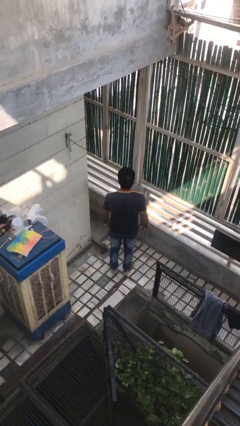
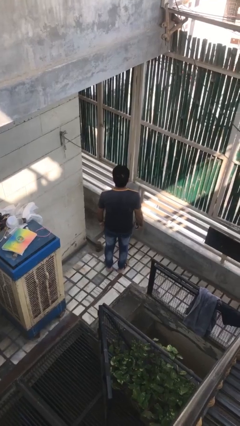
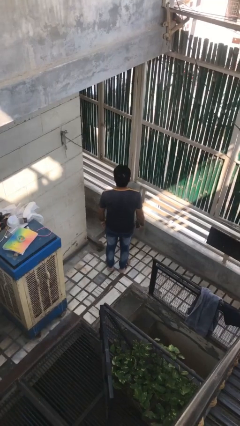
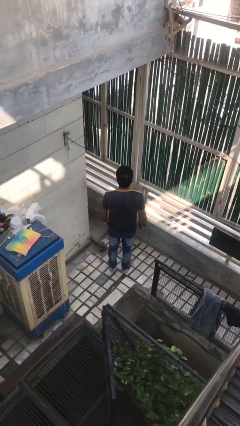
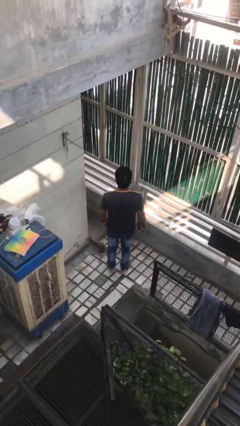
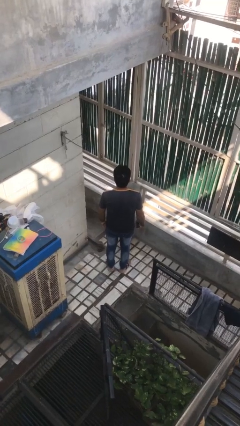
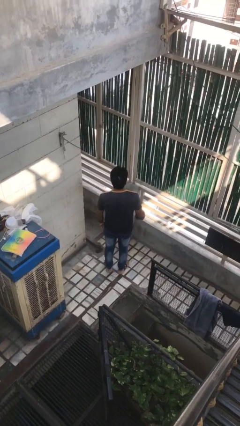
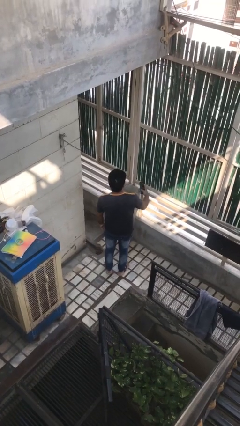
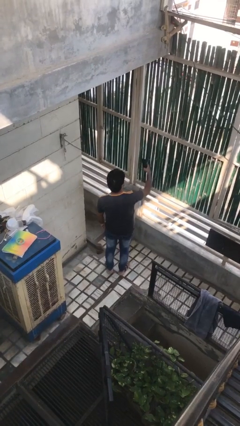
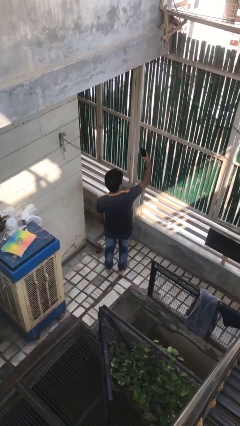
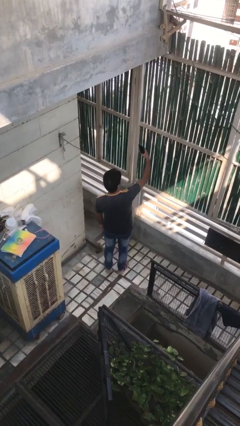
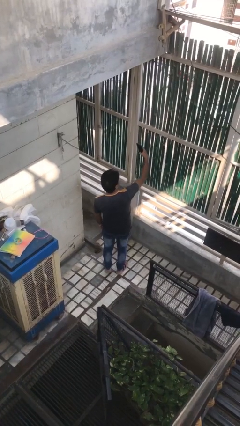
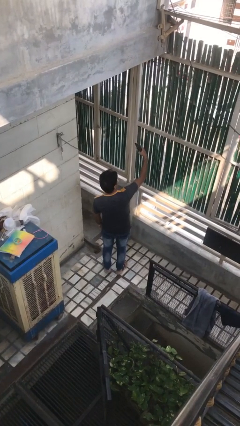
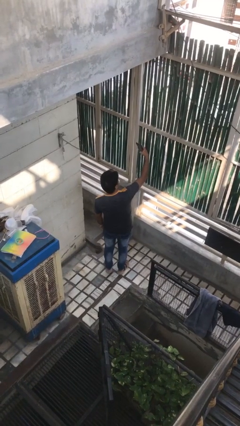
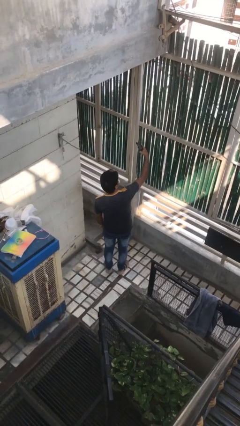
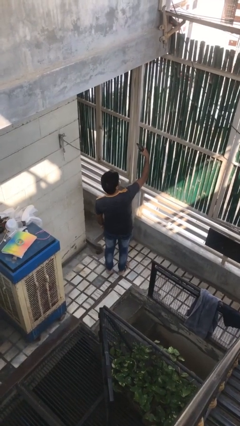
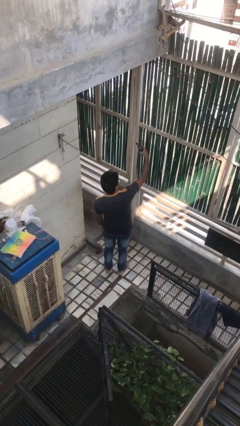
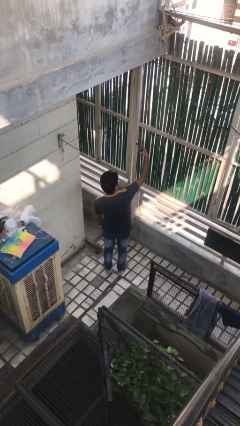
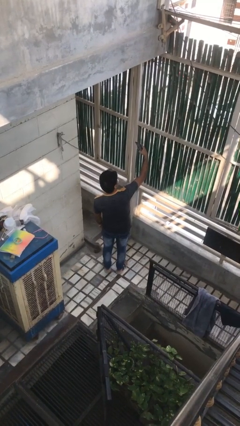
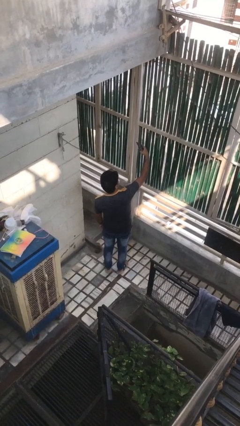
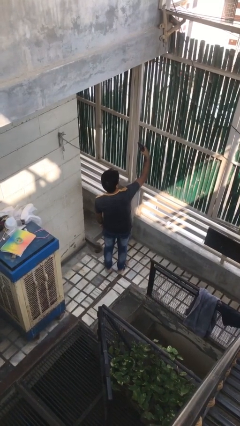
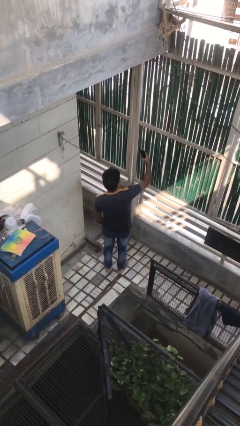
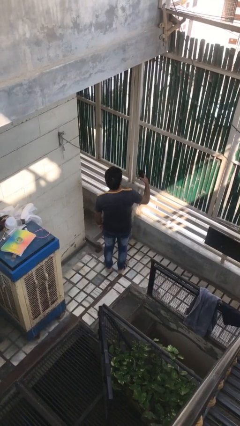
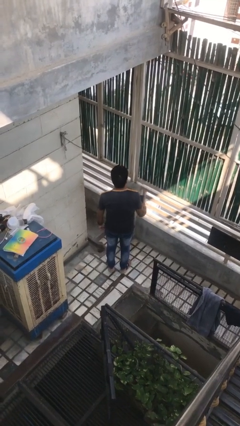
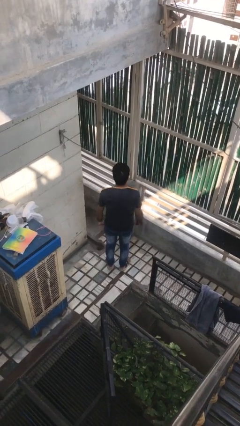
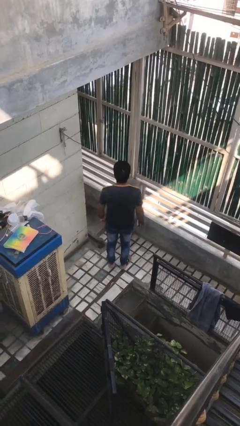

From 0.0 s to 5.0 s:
person takes selfie

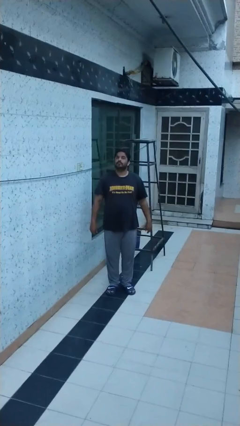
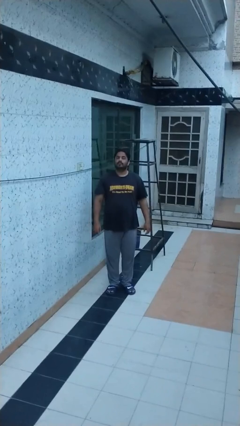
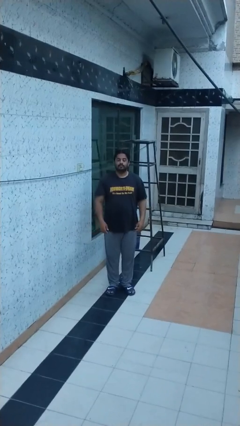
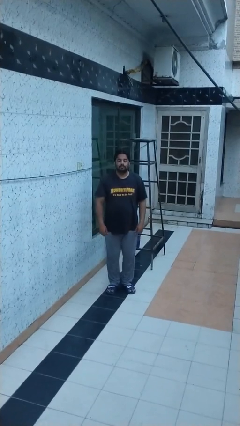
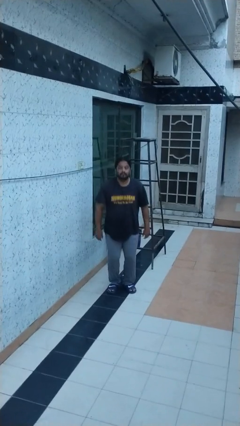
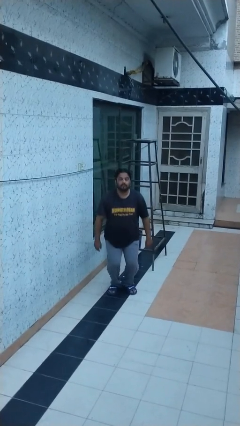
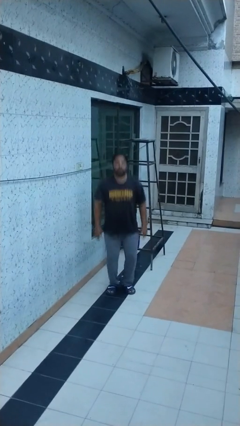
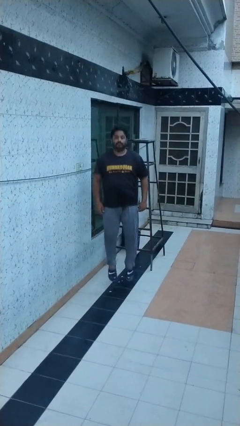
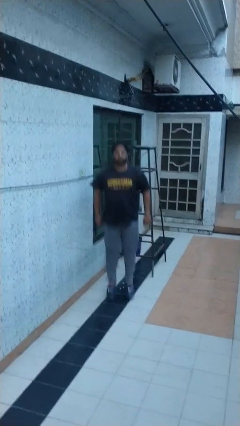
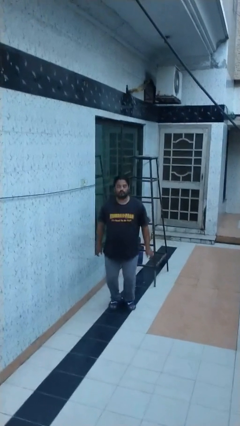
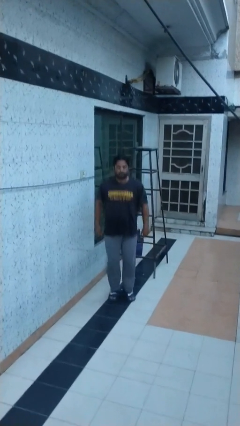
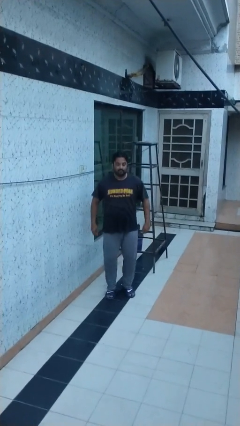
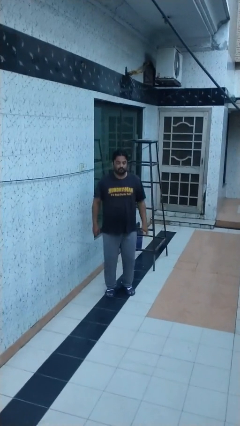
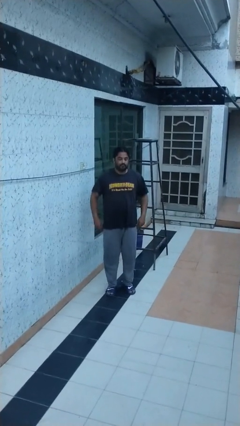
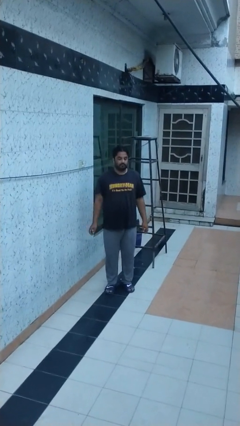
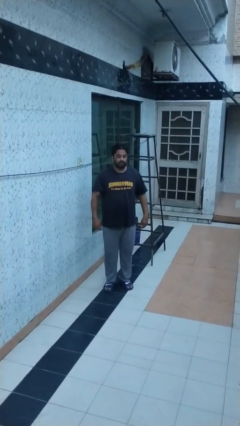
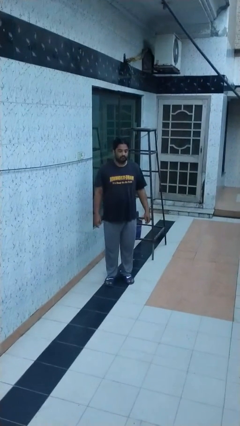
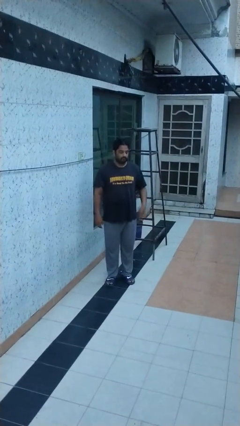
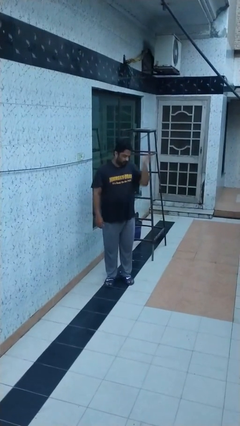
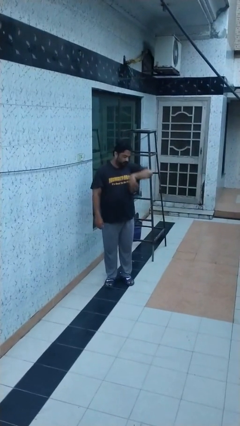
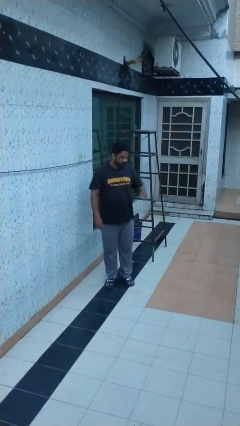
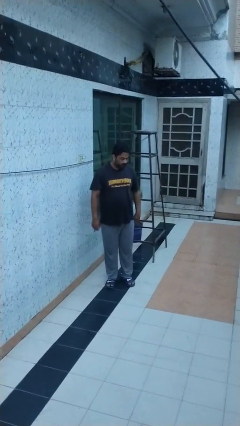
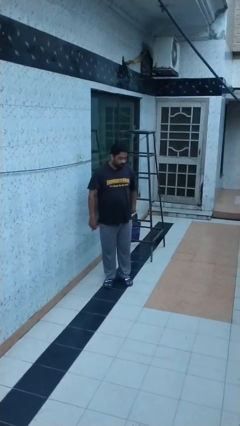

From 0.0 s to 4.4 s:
person jumps

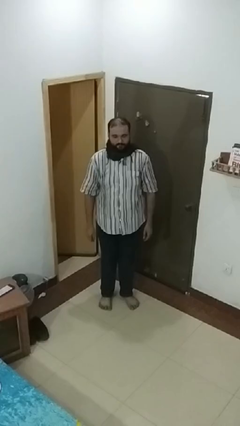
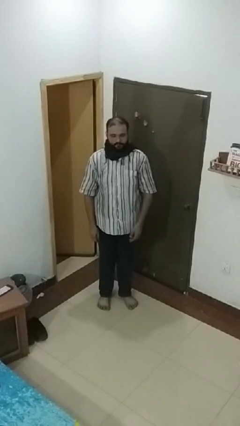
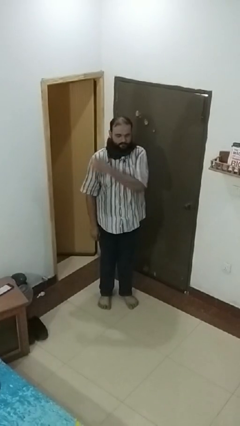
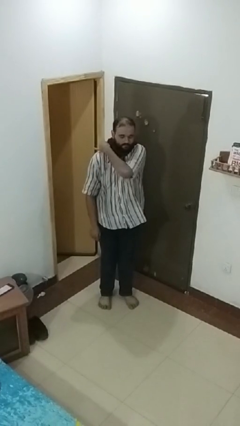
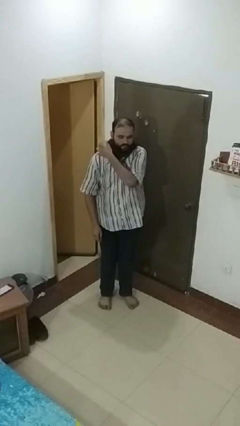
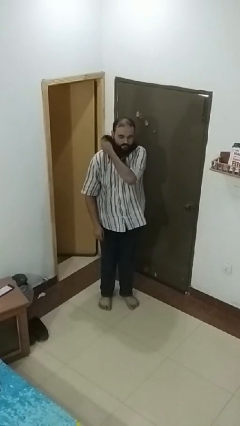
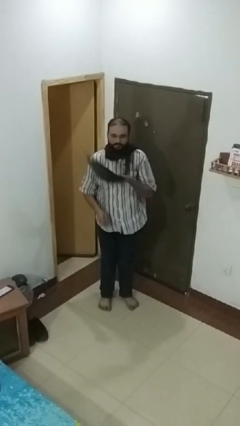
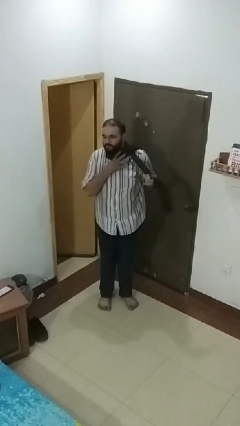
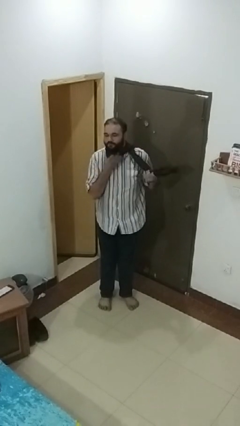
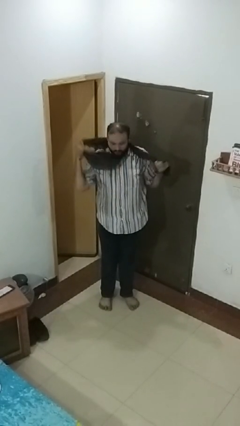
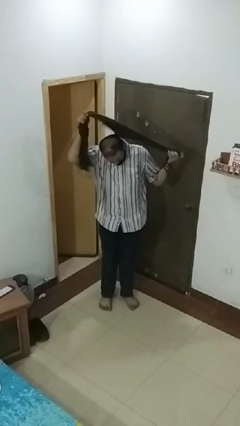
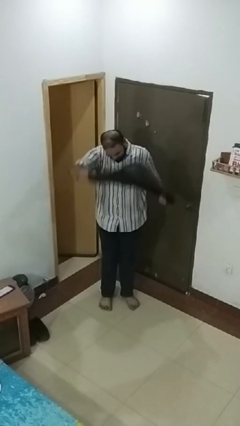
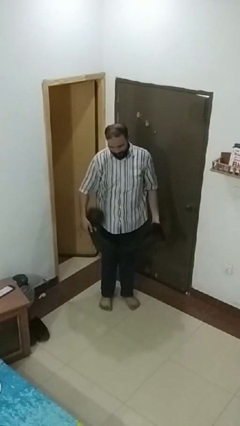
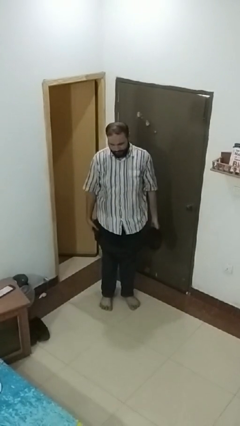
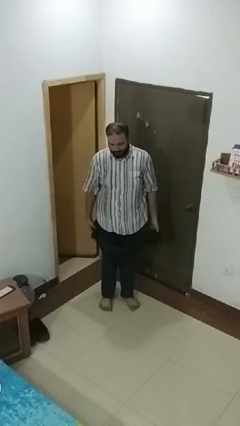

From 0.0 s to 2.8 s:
person takes off scarf

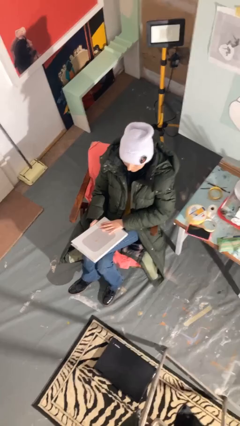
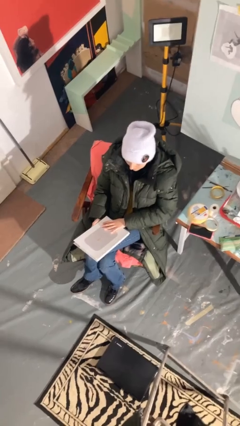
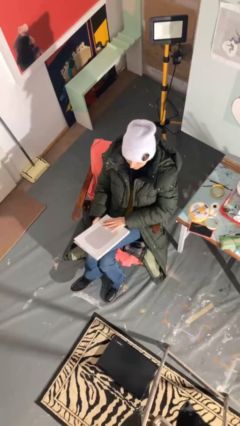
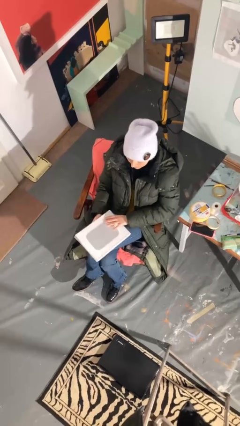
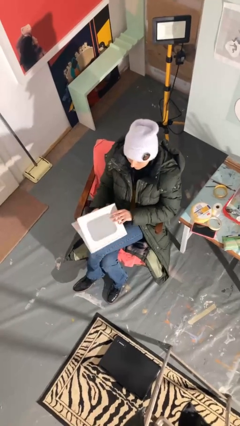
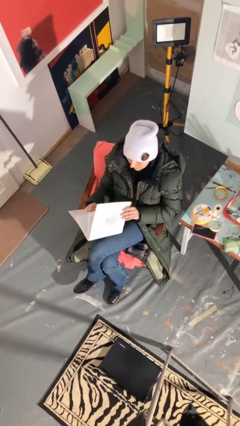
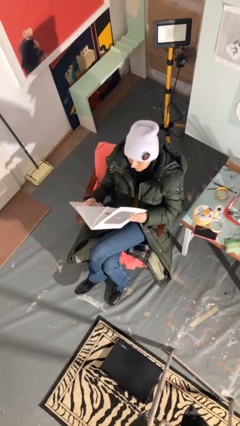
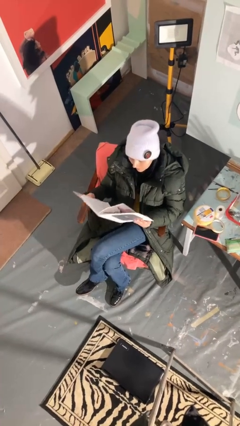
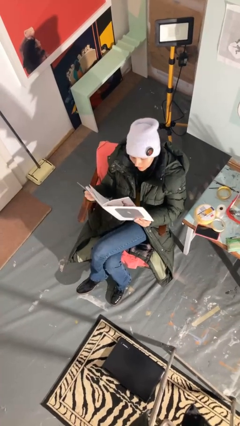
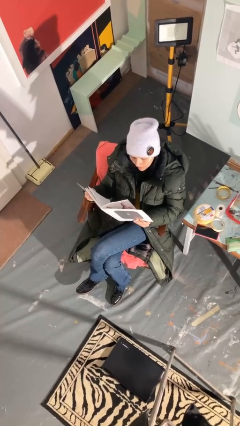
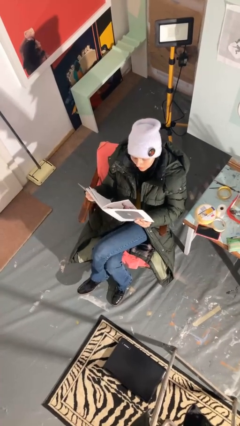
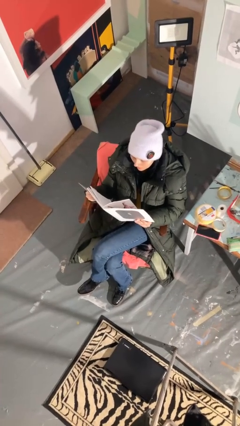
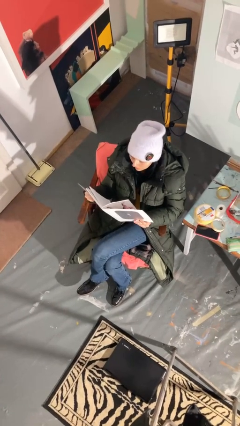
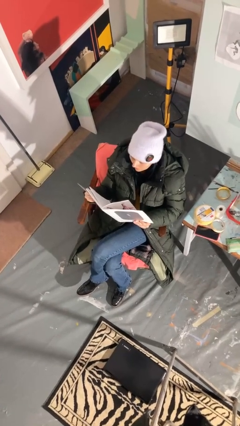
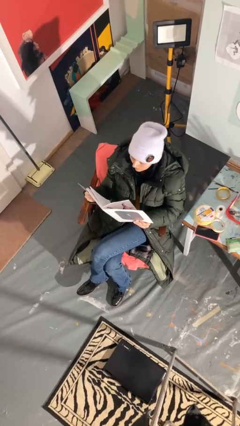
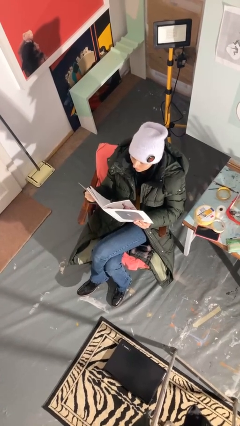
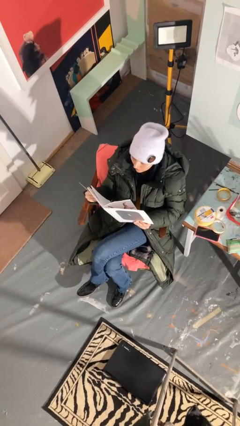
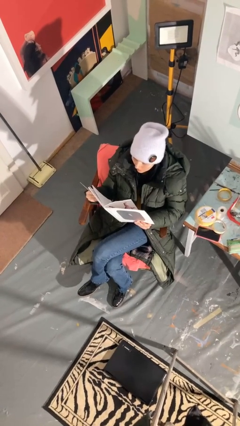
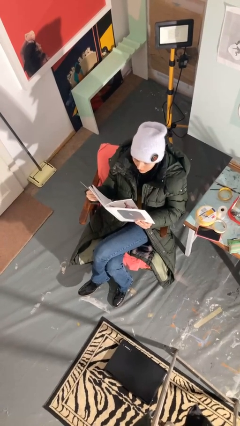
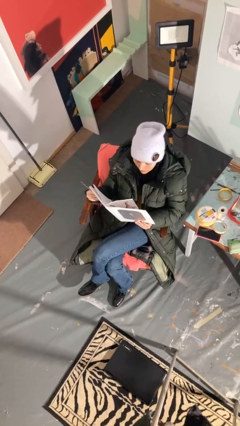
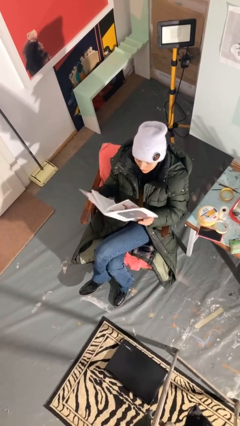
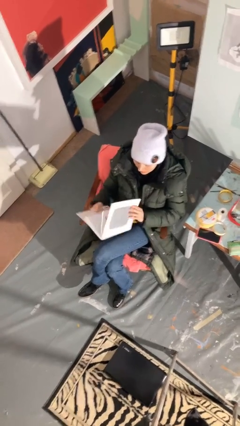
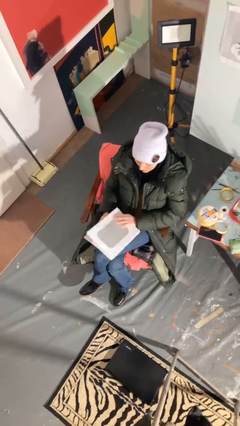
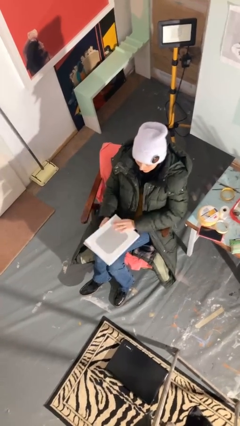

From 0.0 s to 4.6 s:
person reads document

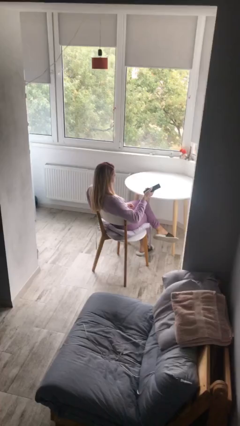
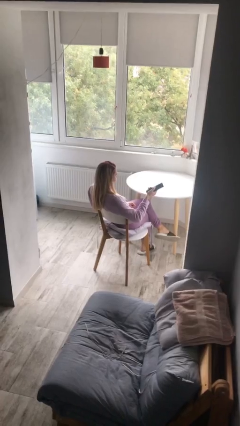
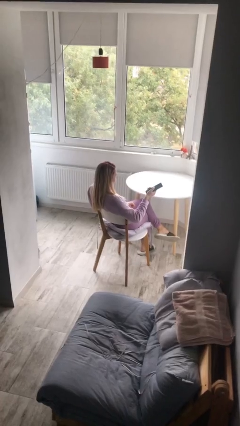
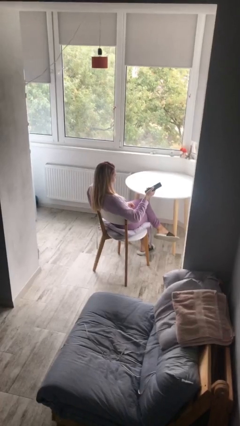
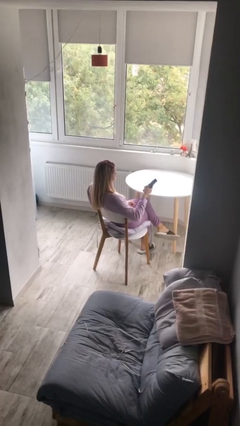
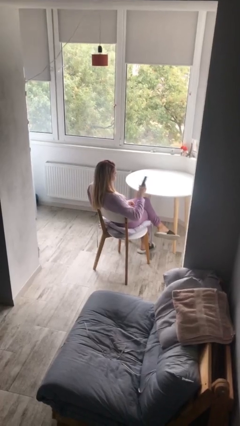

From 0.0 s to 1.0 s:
person uses television remote
